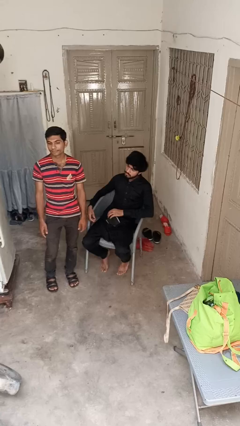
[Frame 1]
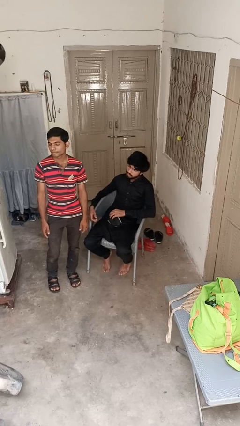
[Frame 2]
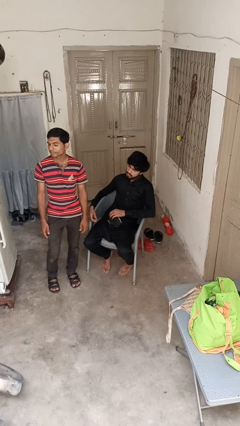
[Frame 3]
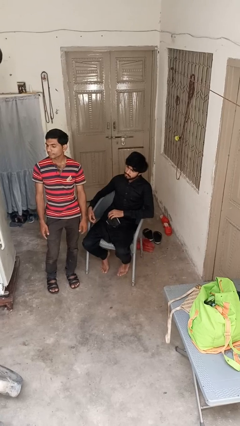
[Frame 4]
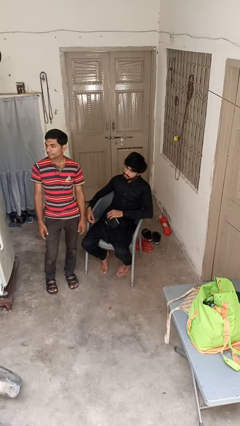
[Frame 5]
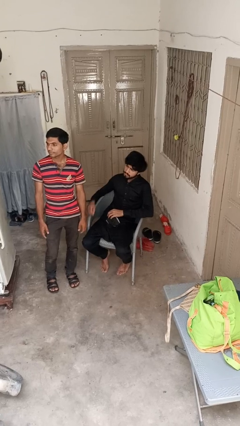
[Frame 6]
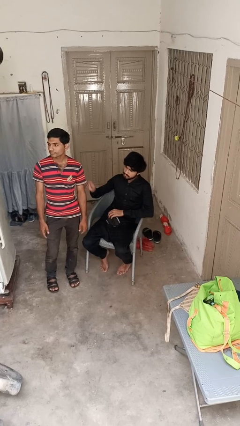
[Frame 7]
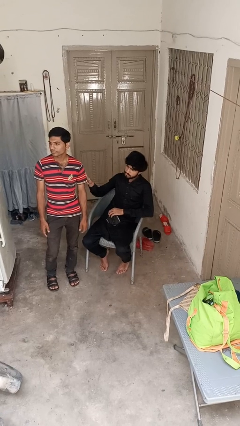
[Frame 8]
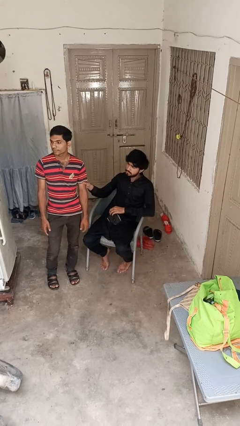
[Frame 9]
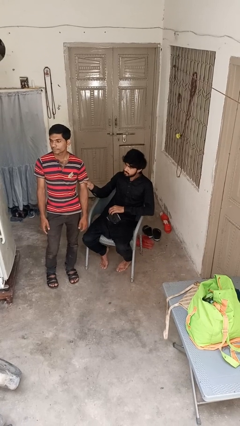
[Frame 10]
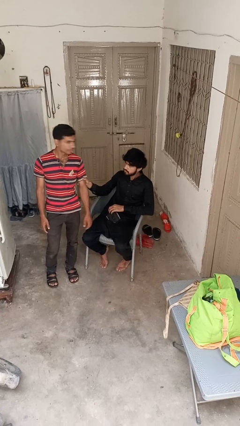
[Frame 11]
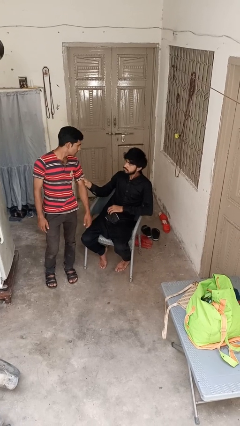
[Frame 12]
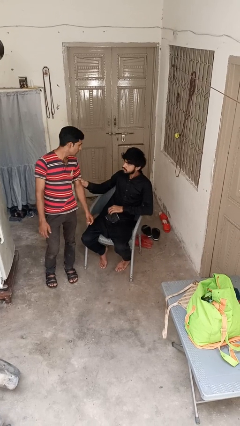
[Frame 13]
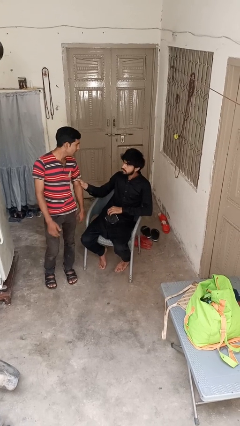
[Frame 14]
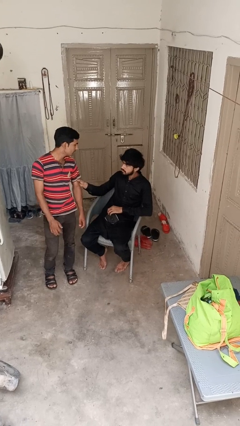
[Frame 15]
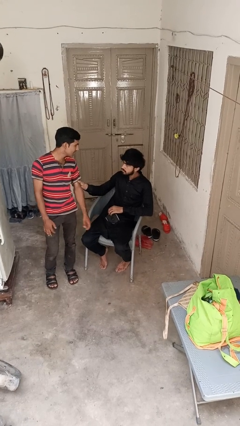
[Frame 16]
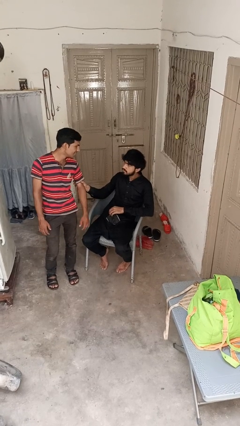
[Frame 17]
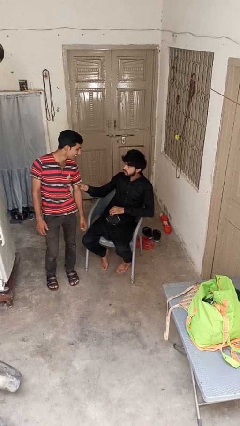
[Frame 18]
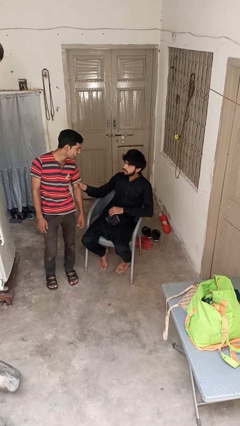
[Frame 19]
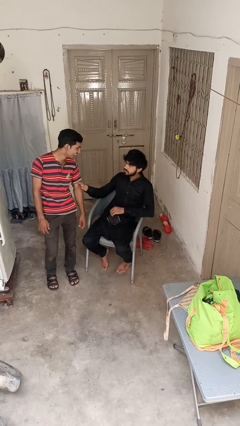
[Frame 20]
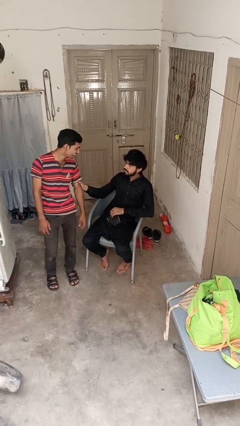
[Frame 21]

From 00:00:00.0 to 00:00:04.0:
person grabs person by bicep

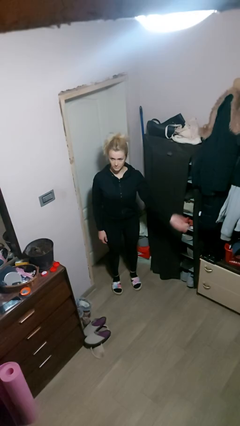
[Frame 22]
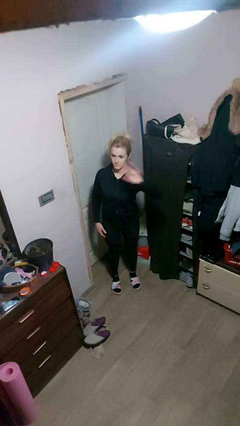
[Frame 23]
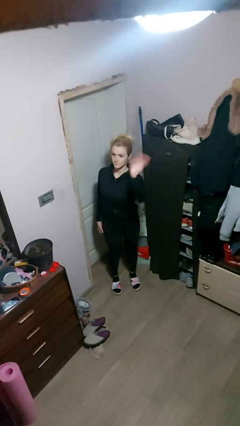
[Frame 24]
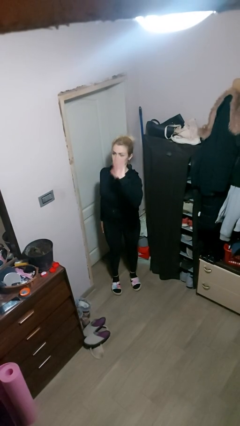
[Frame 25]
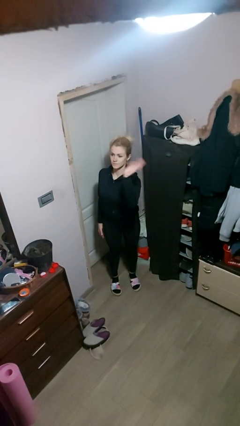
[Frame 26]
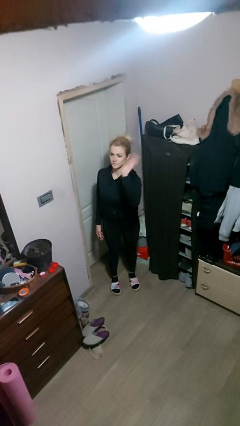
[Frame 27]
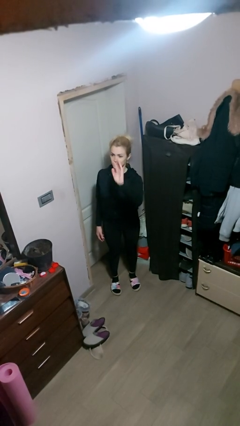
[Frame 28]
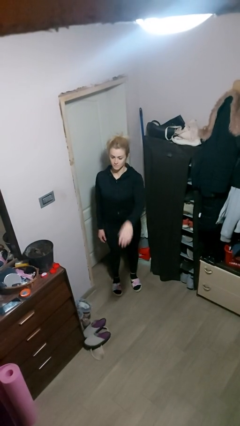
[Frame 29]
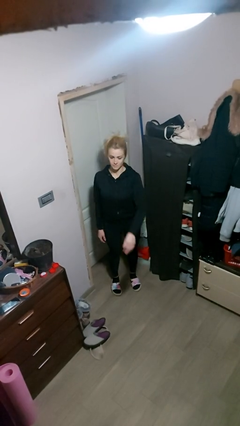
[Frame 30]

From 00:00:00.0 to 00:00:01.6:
person waves at person

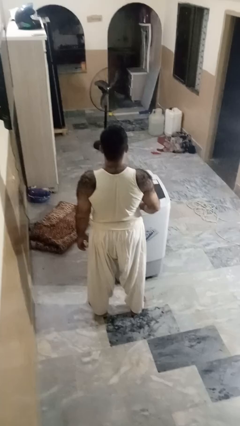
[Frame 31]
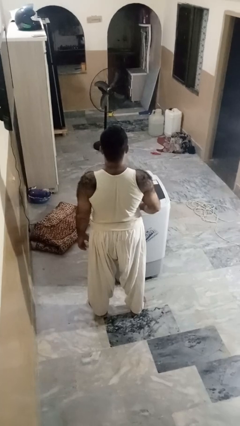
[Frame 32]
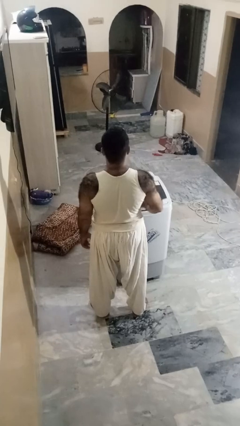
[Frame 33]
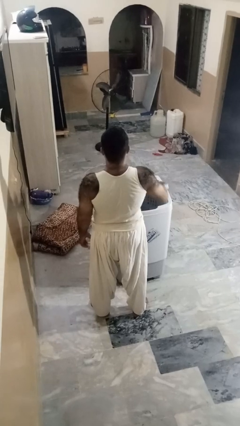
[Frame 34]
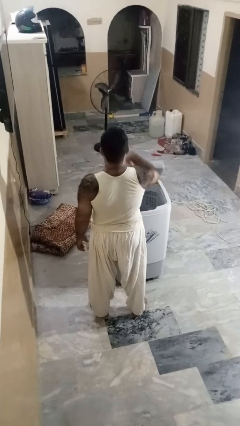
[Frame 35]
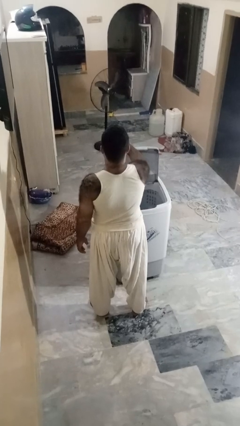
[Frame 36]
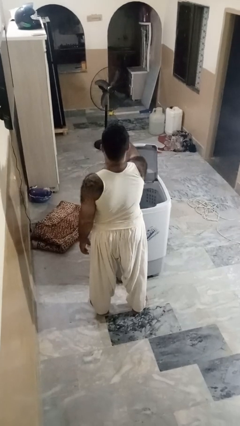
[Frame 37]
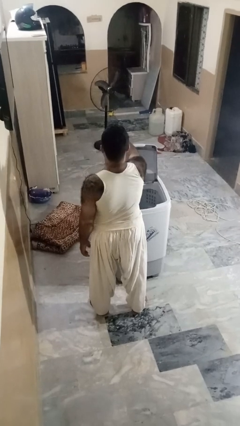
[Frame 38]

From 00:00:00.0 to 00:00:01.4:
person opens clothes washer

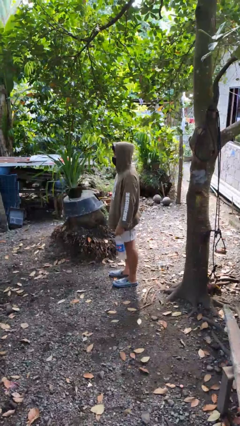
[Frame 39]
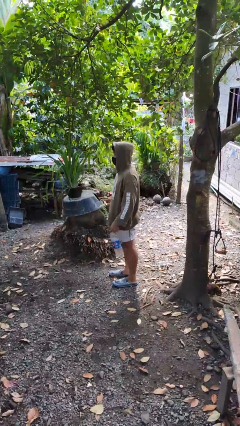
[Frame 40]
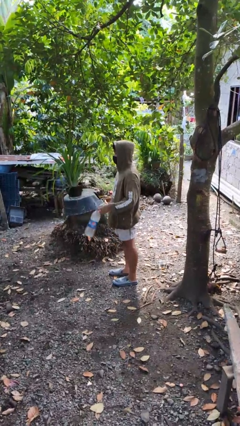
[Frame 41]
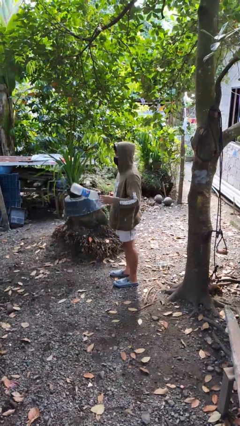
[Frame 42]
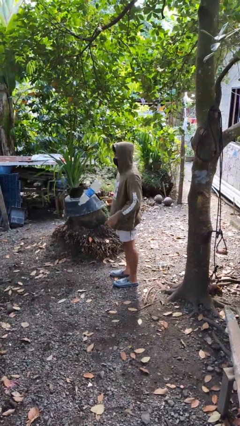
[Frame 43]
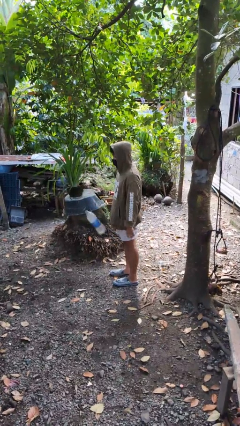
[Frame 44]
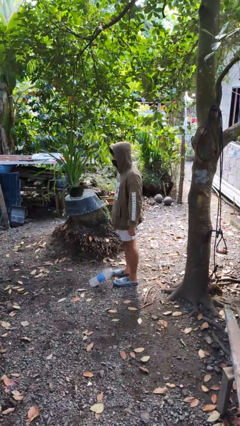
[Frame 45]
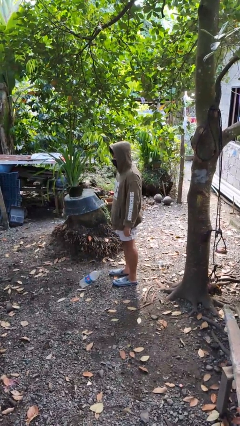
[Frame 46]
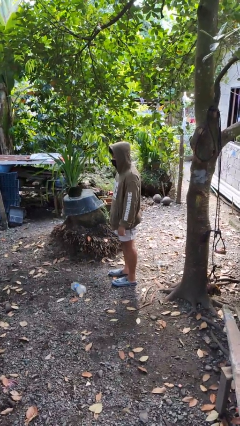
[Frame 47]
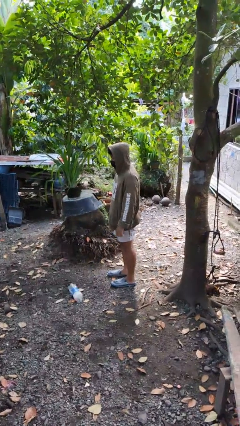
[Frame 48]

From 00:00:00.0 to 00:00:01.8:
person throws object into air

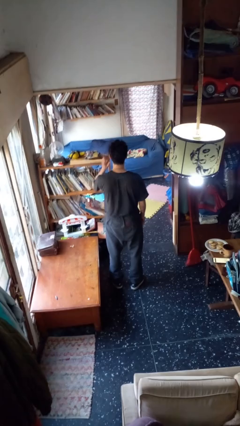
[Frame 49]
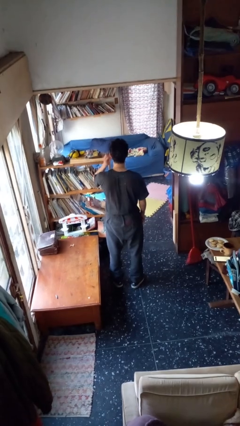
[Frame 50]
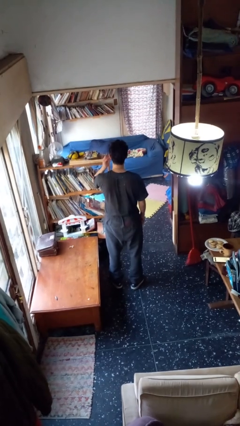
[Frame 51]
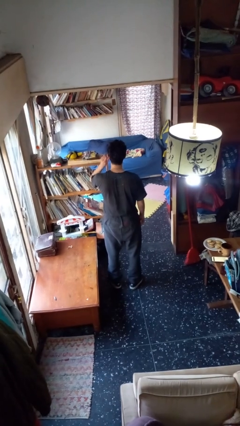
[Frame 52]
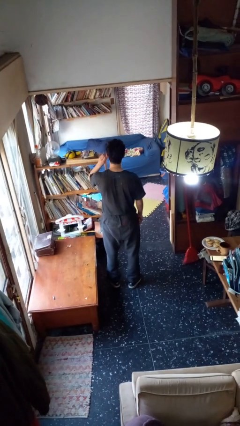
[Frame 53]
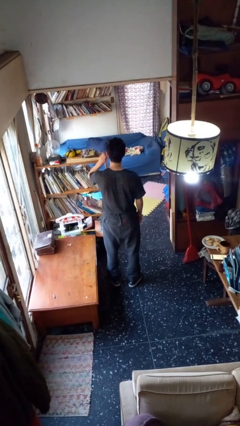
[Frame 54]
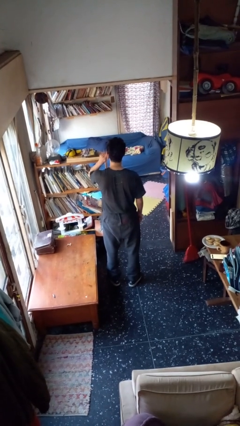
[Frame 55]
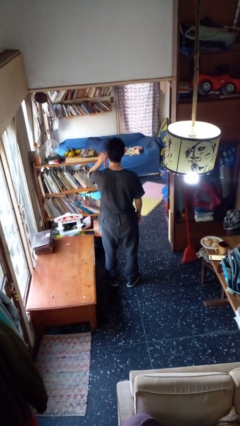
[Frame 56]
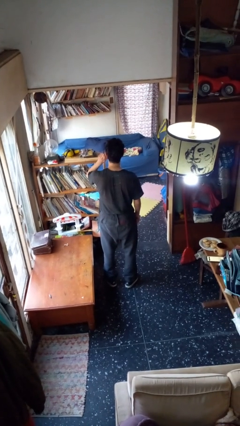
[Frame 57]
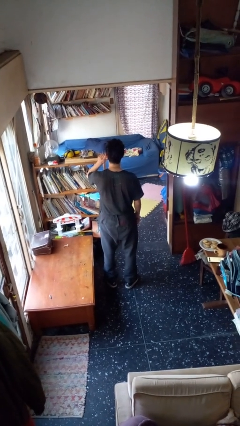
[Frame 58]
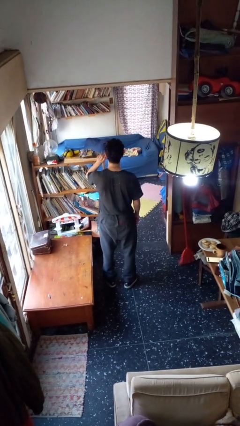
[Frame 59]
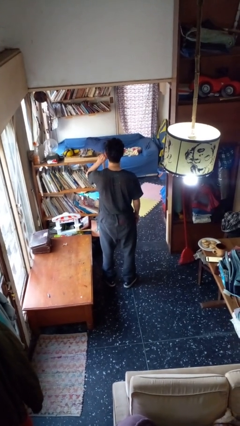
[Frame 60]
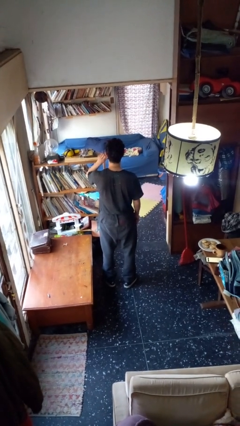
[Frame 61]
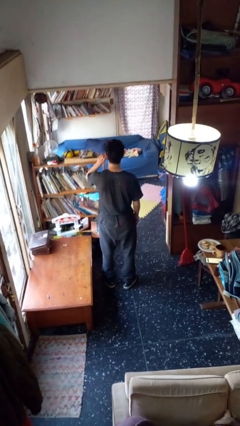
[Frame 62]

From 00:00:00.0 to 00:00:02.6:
person touches earlobe

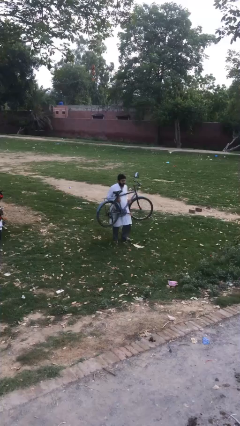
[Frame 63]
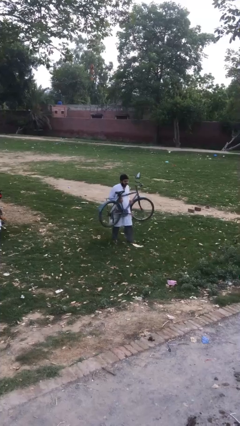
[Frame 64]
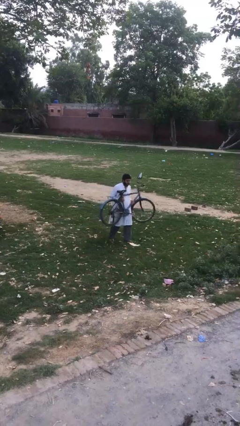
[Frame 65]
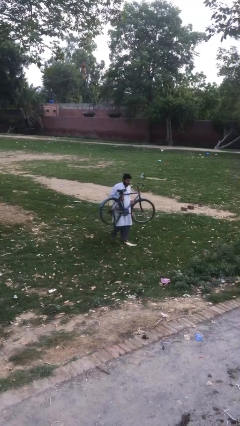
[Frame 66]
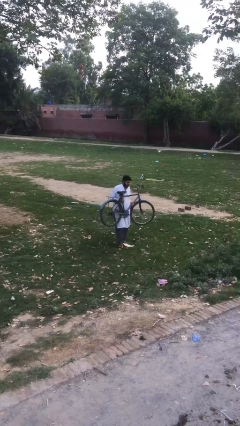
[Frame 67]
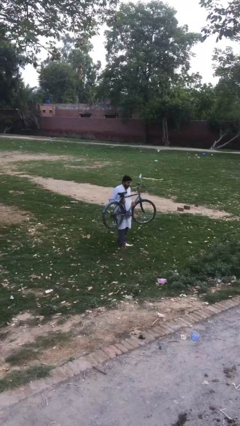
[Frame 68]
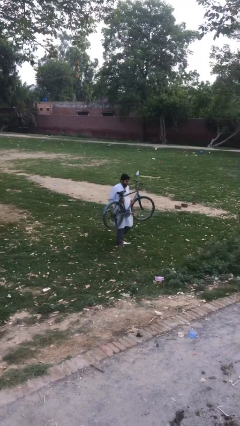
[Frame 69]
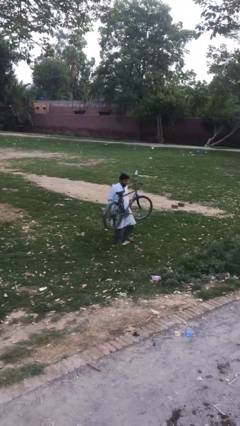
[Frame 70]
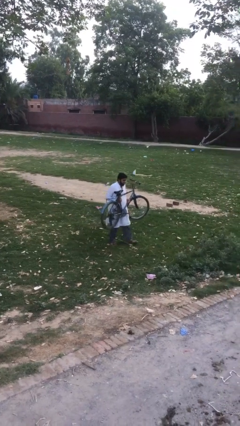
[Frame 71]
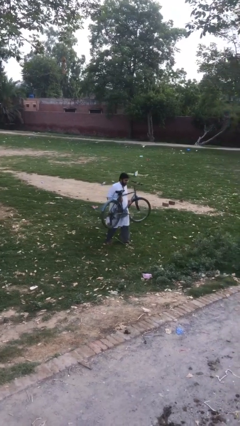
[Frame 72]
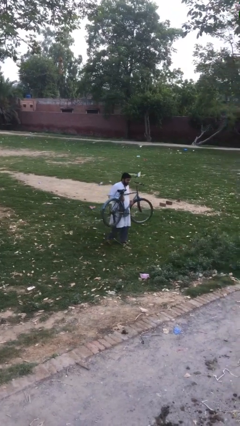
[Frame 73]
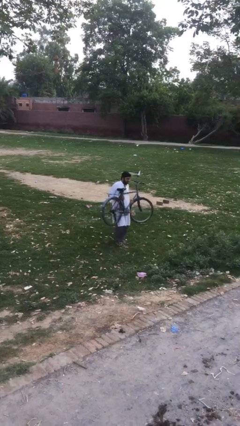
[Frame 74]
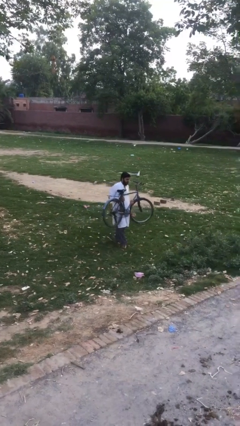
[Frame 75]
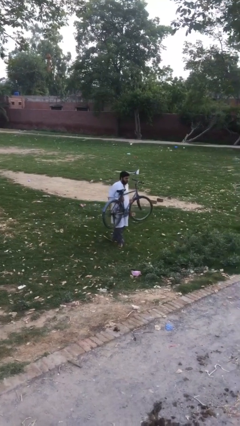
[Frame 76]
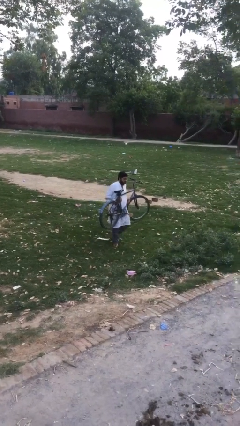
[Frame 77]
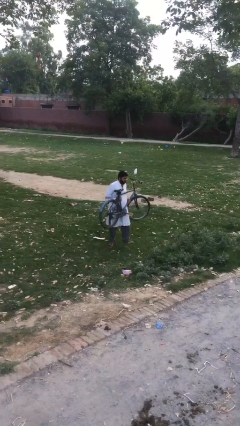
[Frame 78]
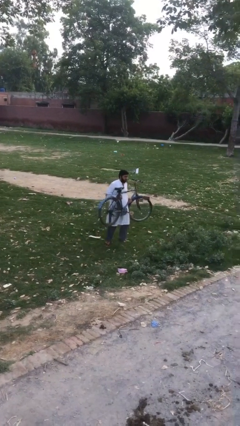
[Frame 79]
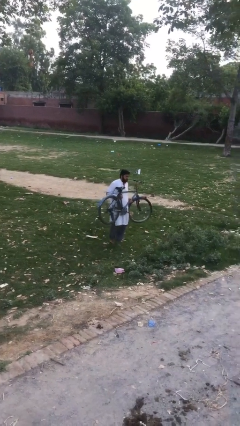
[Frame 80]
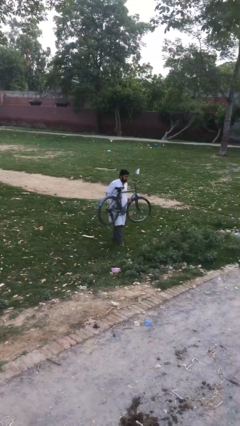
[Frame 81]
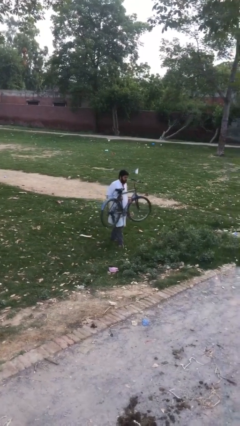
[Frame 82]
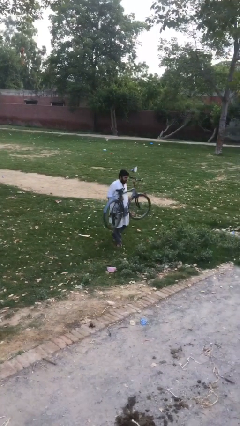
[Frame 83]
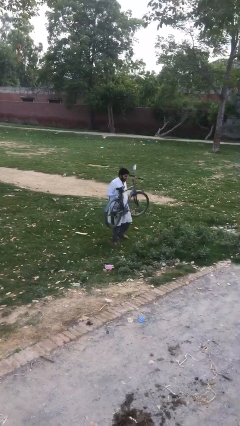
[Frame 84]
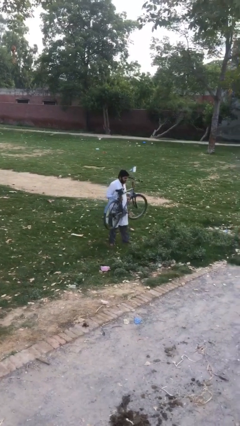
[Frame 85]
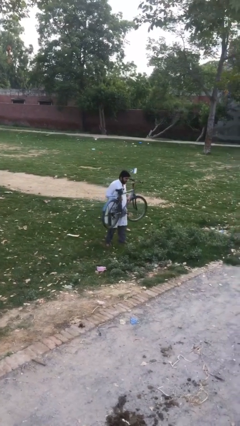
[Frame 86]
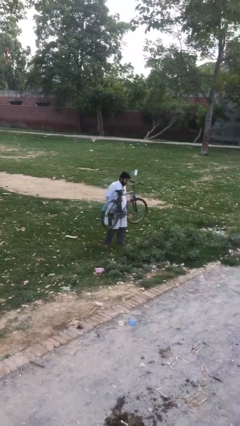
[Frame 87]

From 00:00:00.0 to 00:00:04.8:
person carries heavy object

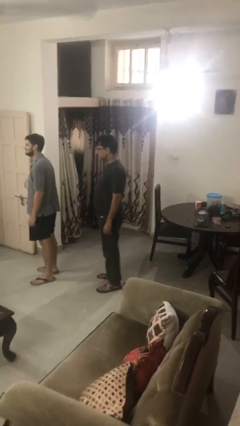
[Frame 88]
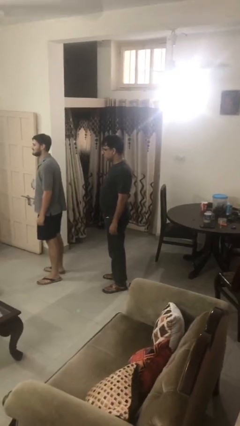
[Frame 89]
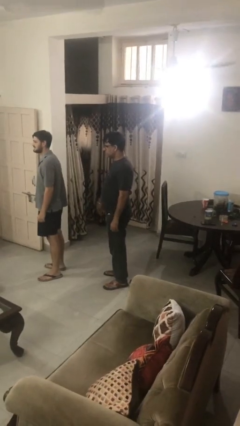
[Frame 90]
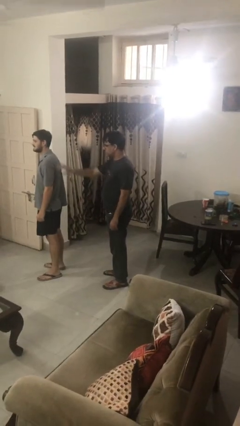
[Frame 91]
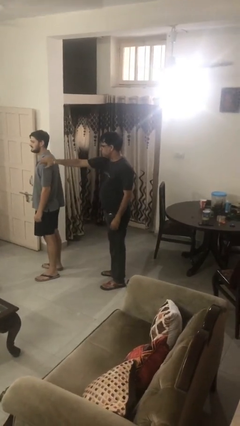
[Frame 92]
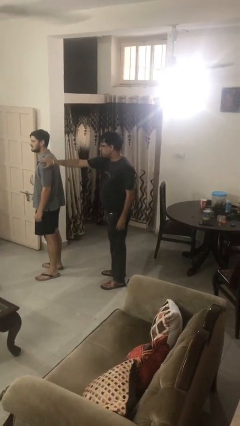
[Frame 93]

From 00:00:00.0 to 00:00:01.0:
person grabs person by shoulder
